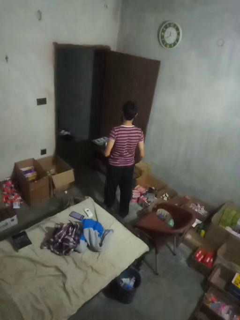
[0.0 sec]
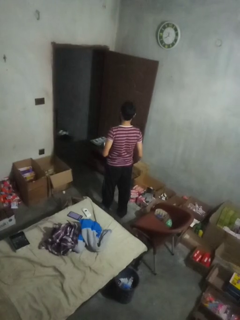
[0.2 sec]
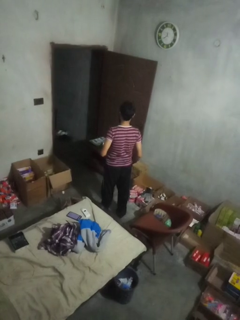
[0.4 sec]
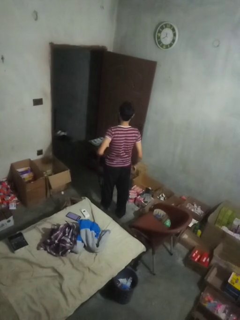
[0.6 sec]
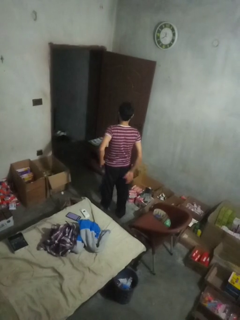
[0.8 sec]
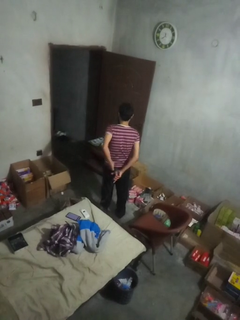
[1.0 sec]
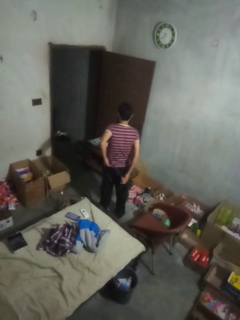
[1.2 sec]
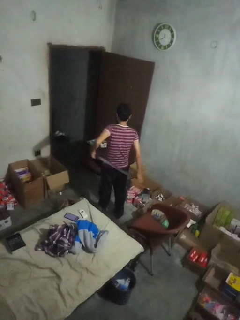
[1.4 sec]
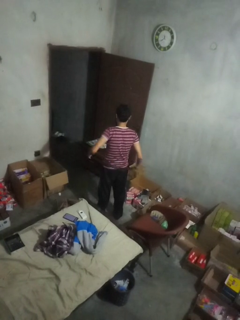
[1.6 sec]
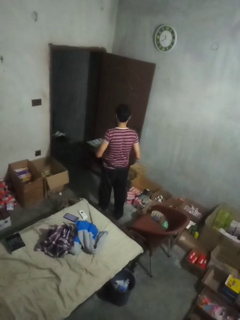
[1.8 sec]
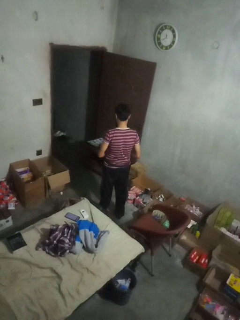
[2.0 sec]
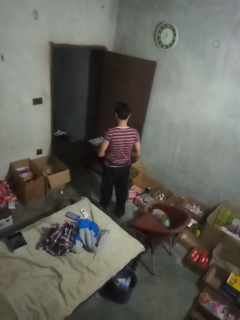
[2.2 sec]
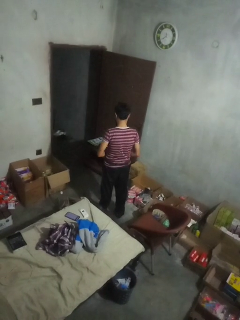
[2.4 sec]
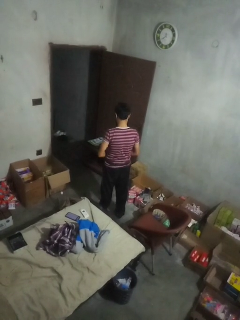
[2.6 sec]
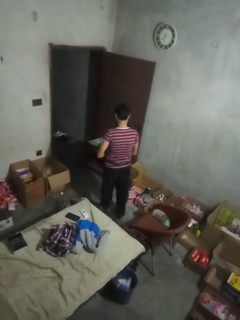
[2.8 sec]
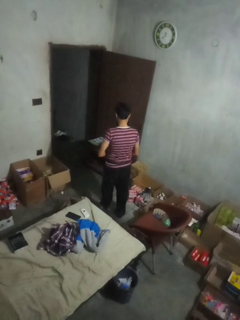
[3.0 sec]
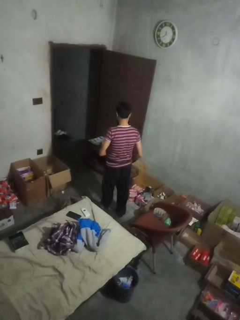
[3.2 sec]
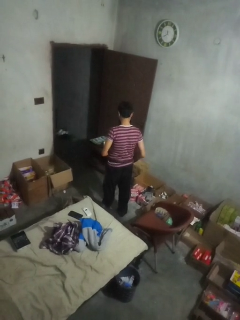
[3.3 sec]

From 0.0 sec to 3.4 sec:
person puts on belt

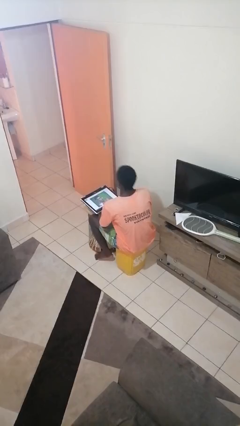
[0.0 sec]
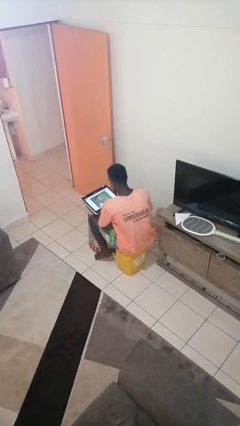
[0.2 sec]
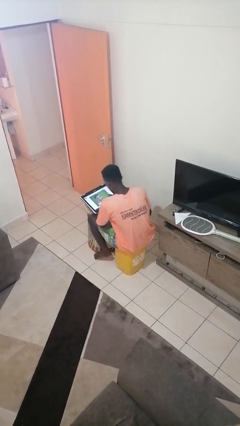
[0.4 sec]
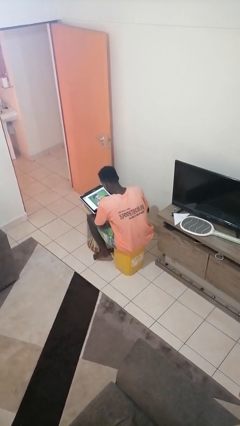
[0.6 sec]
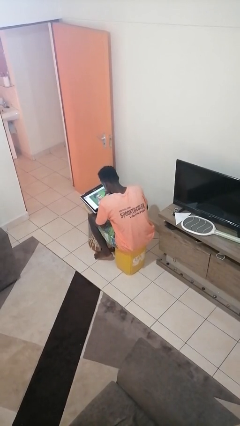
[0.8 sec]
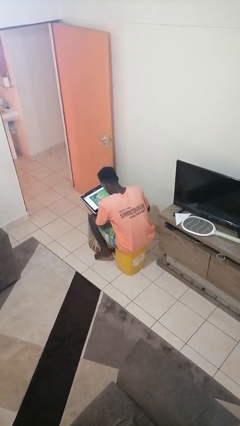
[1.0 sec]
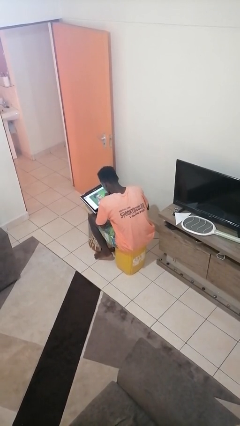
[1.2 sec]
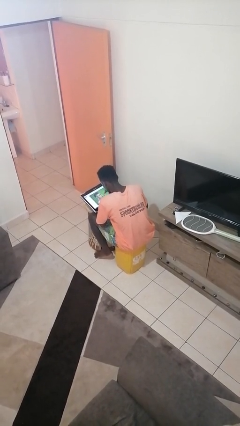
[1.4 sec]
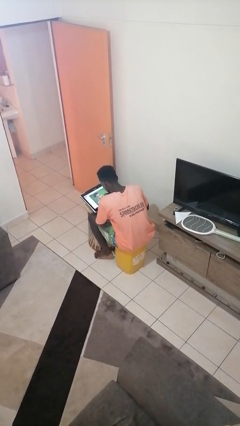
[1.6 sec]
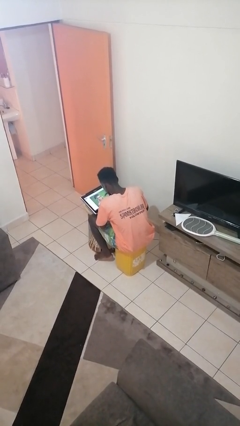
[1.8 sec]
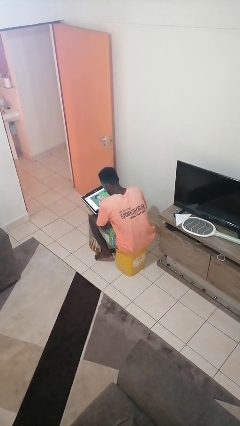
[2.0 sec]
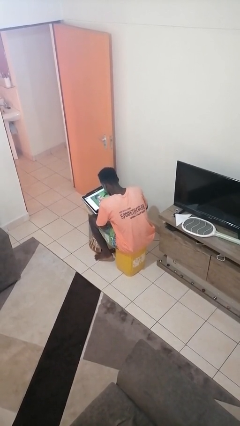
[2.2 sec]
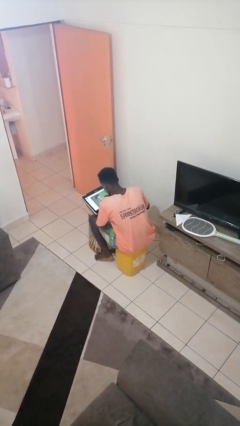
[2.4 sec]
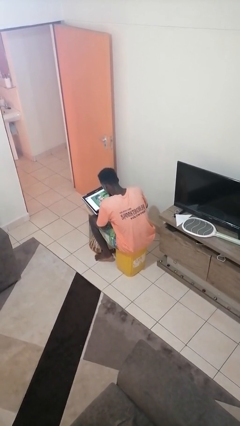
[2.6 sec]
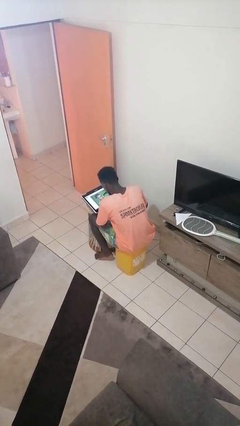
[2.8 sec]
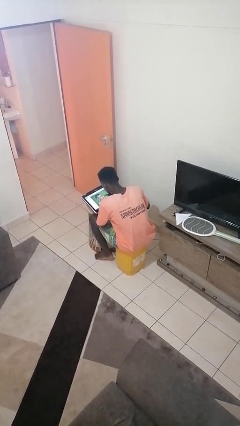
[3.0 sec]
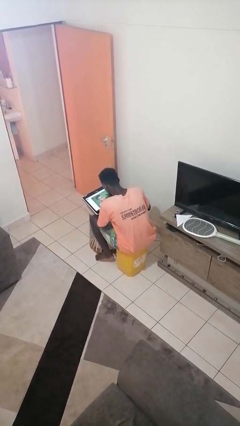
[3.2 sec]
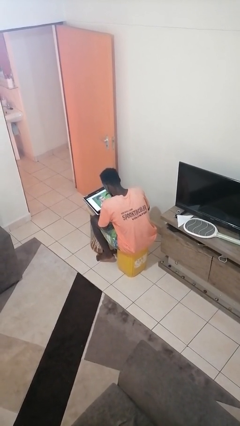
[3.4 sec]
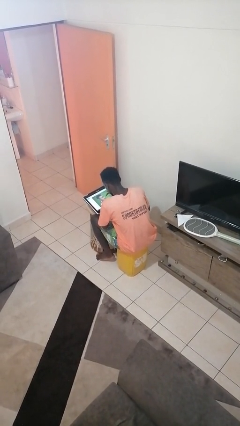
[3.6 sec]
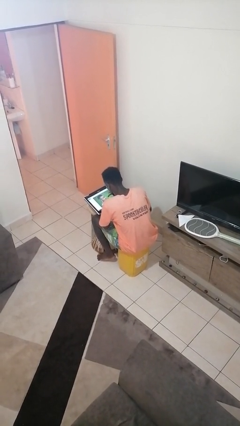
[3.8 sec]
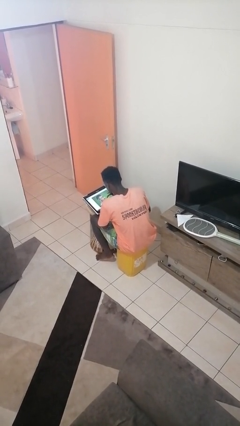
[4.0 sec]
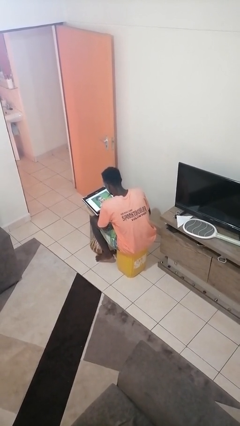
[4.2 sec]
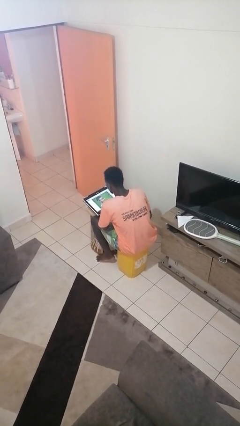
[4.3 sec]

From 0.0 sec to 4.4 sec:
person interacts with tablet

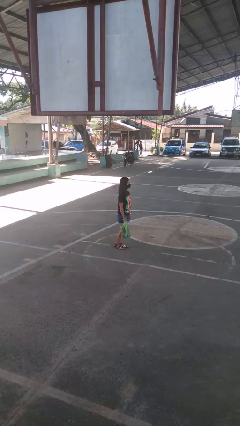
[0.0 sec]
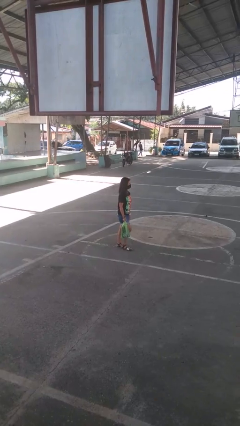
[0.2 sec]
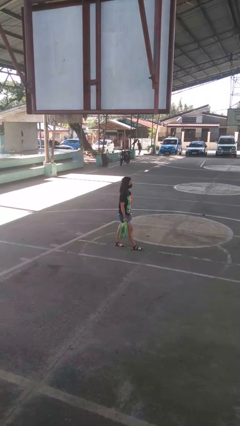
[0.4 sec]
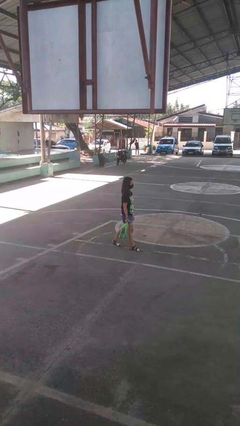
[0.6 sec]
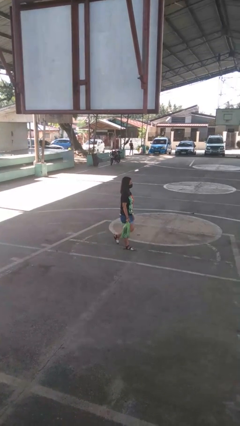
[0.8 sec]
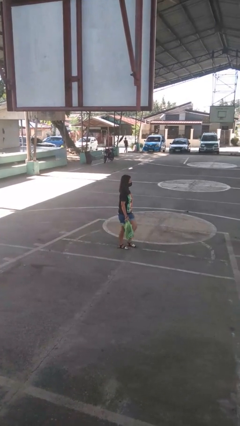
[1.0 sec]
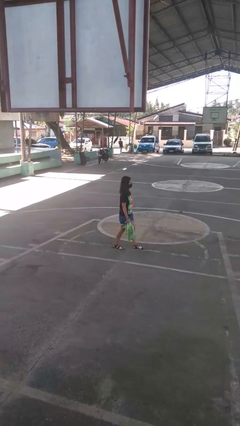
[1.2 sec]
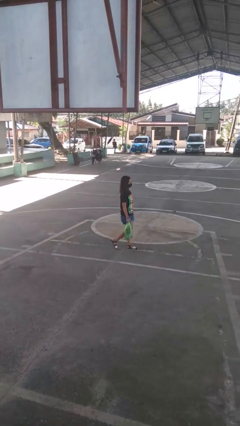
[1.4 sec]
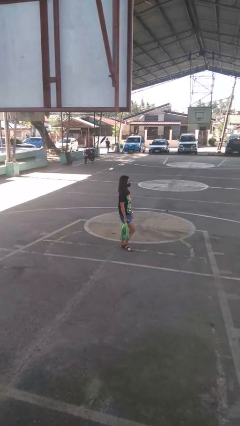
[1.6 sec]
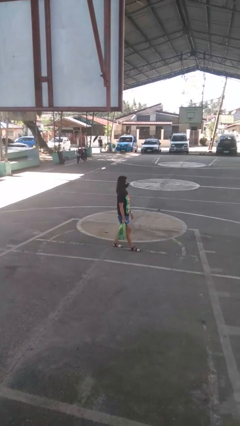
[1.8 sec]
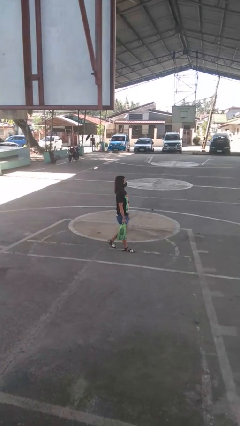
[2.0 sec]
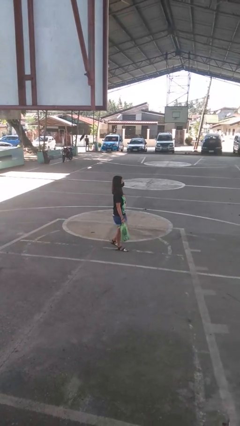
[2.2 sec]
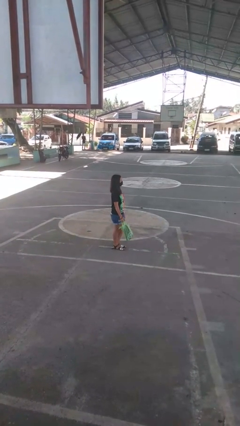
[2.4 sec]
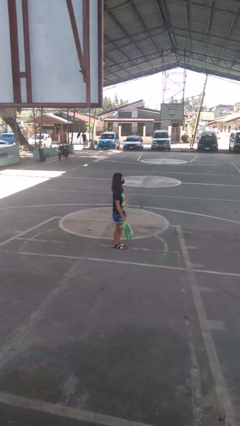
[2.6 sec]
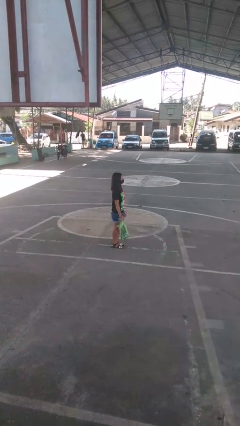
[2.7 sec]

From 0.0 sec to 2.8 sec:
person carries groceries

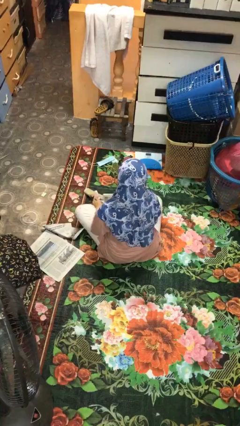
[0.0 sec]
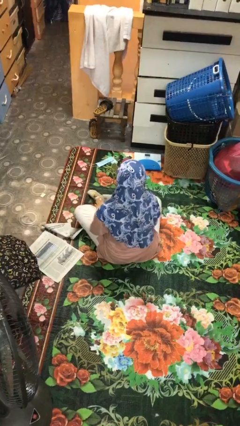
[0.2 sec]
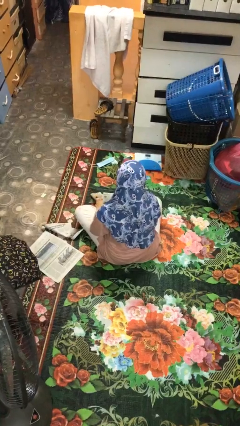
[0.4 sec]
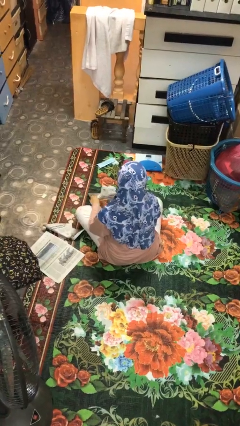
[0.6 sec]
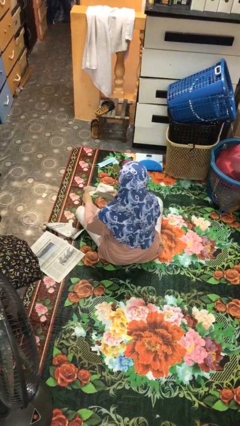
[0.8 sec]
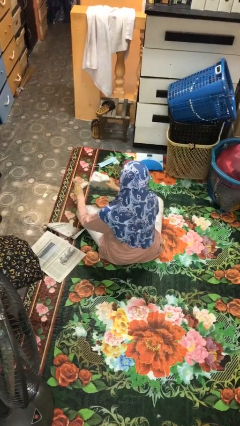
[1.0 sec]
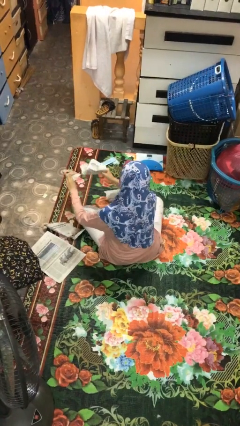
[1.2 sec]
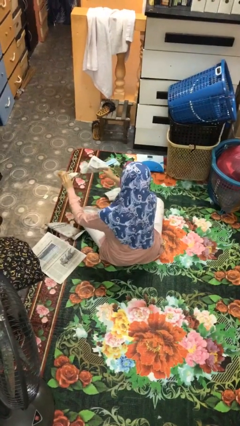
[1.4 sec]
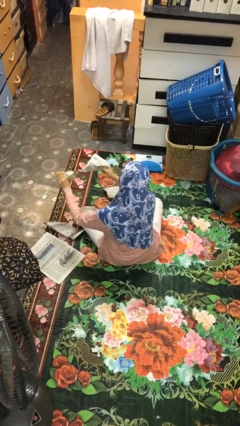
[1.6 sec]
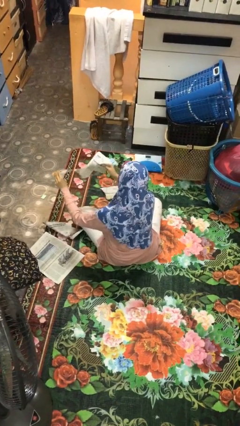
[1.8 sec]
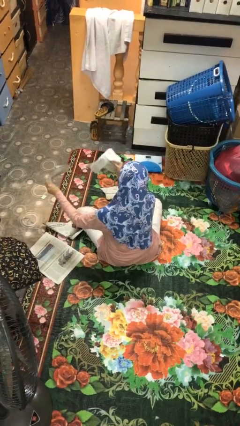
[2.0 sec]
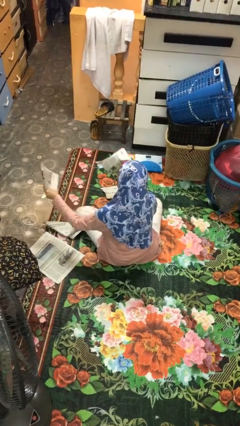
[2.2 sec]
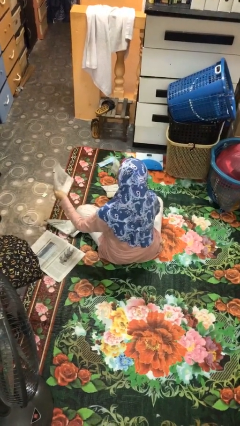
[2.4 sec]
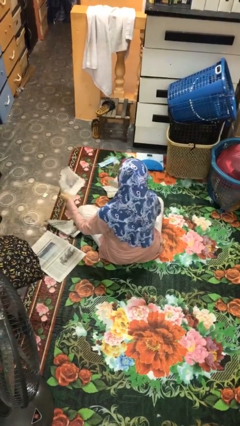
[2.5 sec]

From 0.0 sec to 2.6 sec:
person tears paper

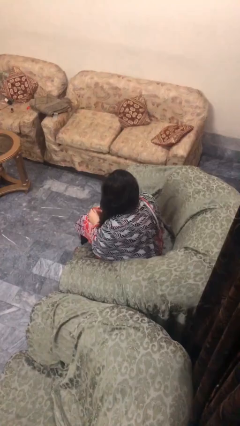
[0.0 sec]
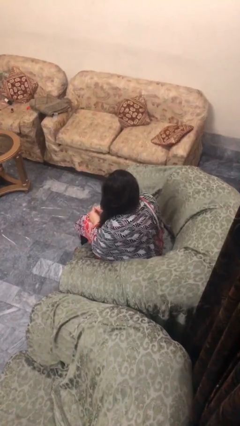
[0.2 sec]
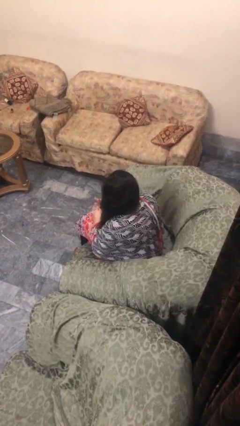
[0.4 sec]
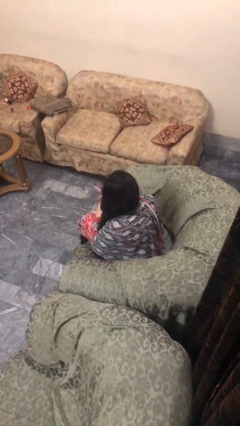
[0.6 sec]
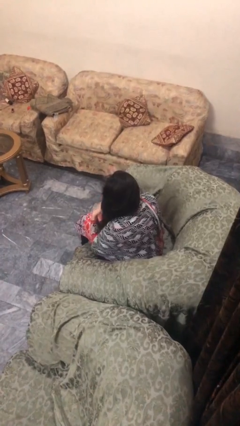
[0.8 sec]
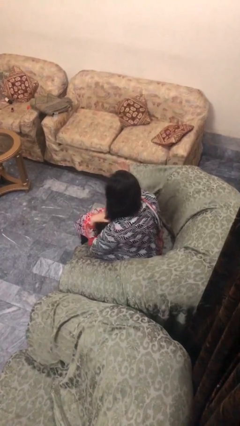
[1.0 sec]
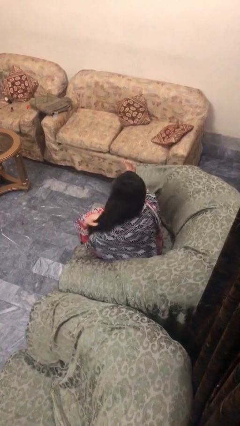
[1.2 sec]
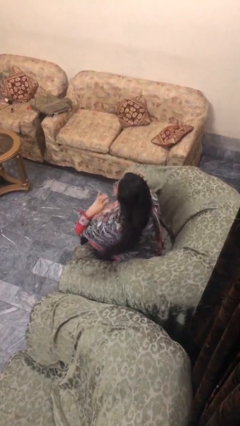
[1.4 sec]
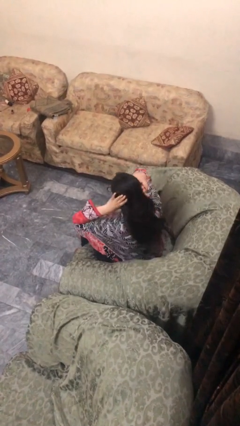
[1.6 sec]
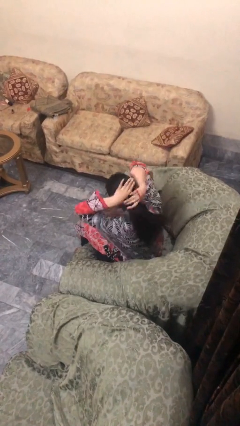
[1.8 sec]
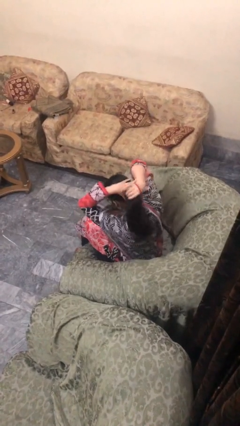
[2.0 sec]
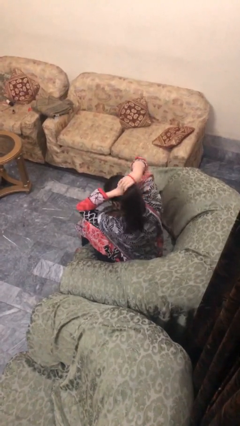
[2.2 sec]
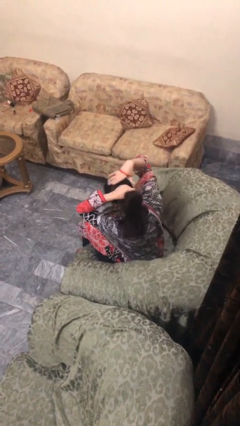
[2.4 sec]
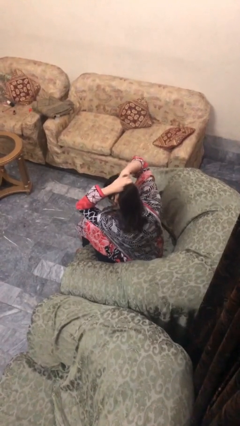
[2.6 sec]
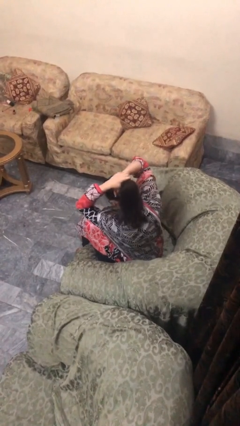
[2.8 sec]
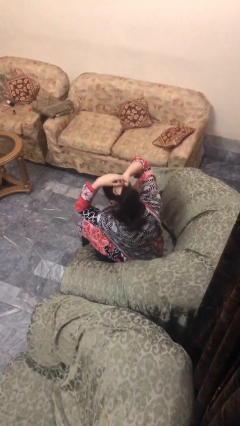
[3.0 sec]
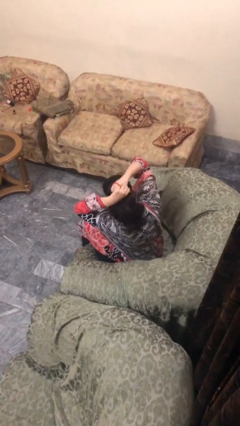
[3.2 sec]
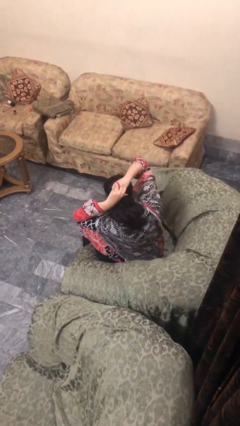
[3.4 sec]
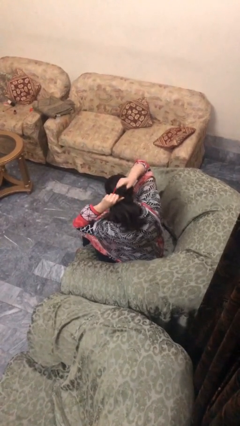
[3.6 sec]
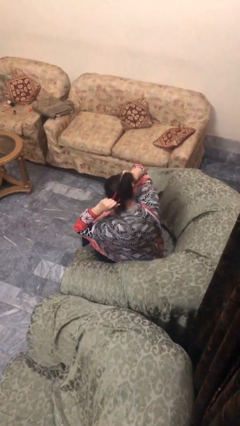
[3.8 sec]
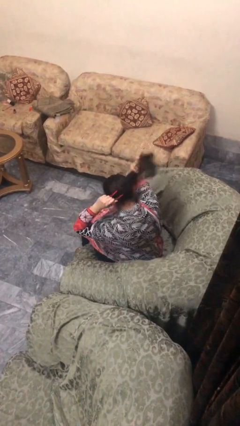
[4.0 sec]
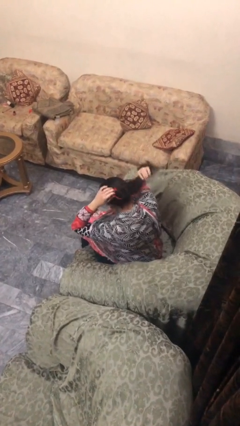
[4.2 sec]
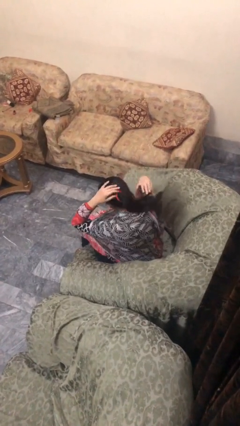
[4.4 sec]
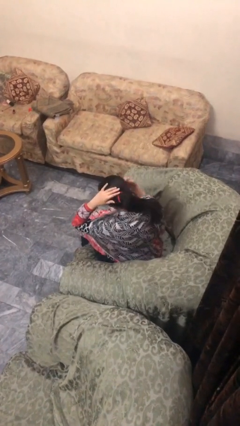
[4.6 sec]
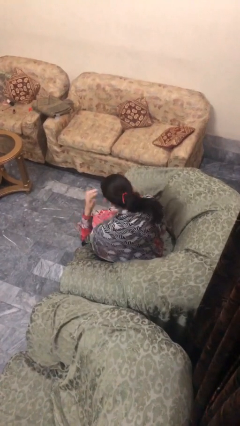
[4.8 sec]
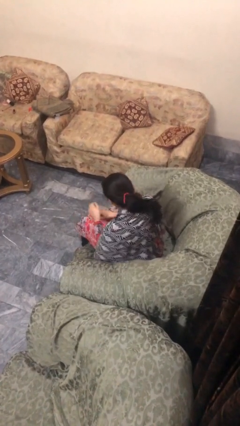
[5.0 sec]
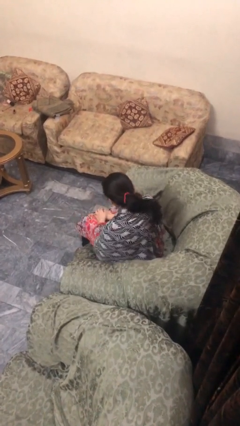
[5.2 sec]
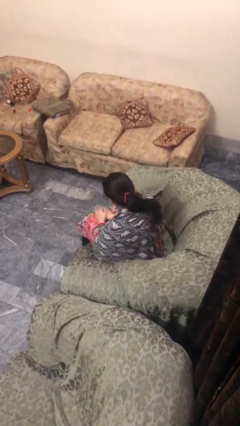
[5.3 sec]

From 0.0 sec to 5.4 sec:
person puts hair in ponytail
